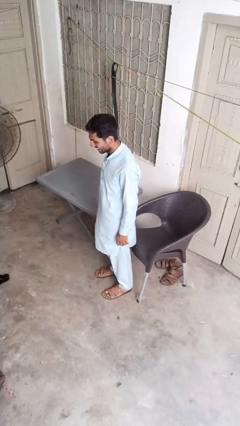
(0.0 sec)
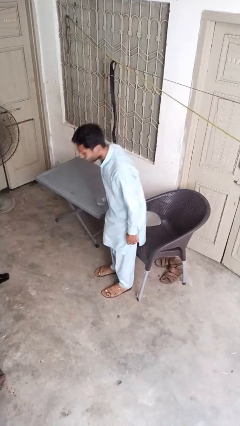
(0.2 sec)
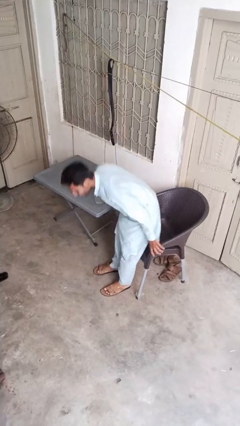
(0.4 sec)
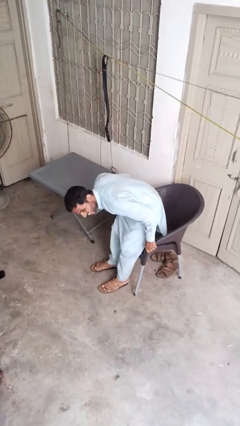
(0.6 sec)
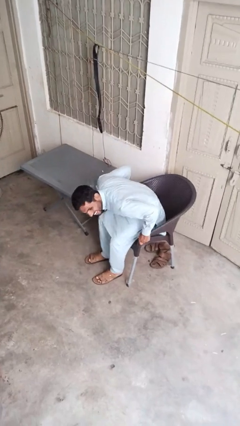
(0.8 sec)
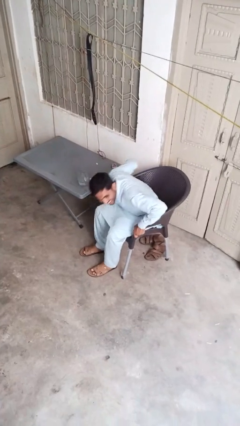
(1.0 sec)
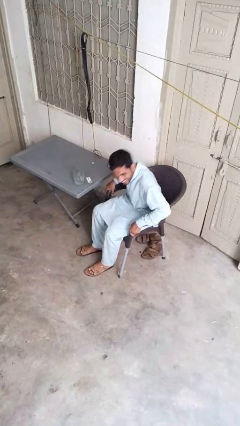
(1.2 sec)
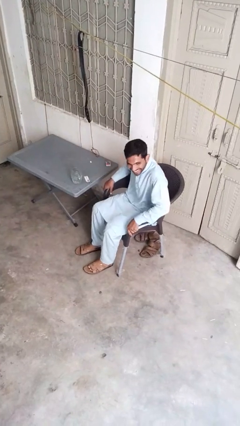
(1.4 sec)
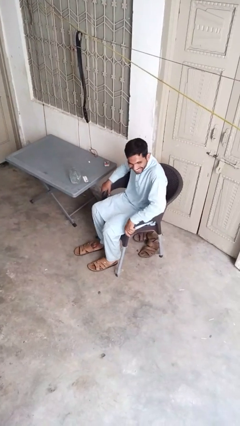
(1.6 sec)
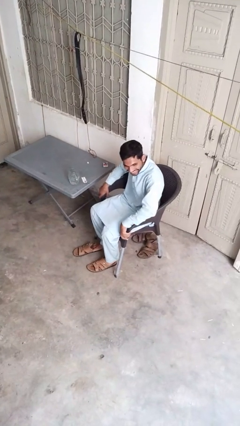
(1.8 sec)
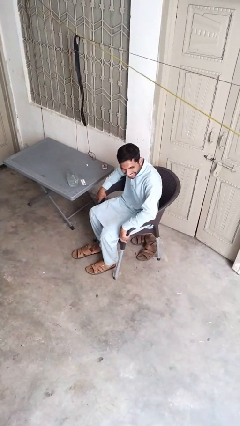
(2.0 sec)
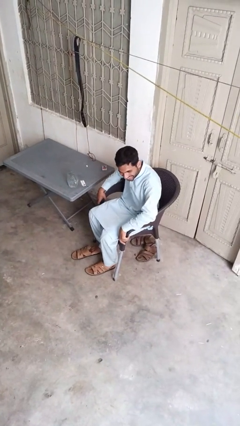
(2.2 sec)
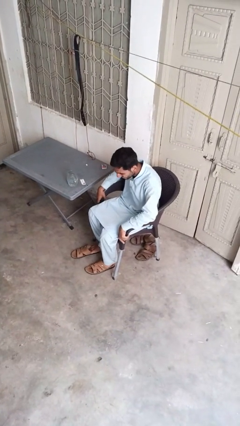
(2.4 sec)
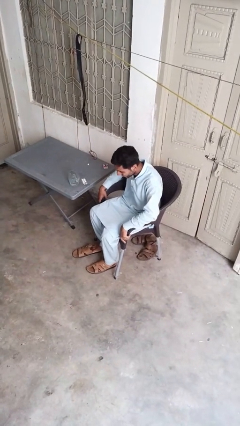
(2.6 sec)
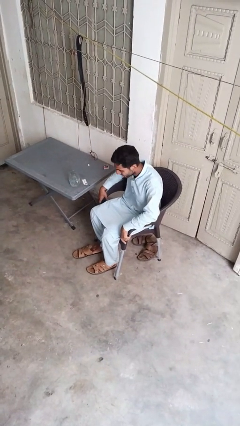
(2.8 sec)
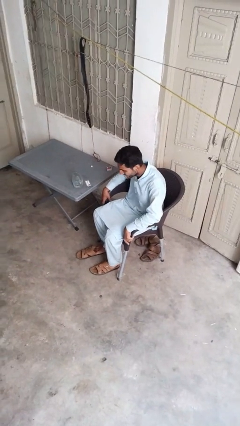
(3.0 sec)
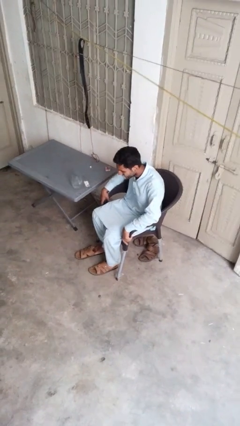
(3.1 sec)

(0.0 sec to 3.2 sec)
person sits down

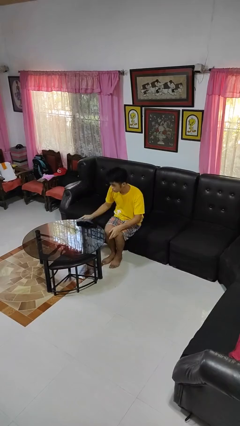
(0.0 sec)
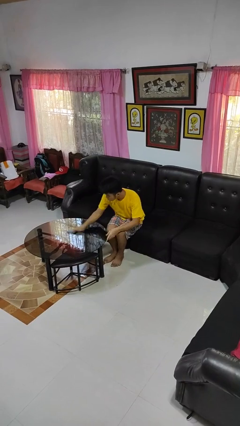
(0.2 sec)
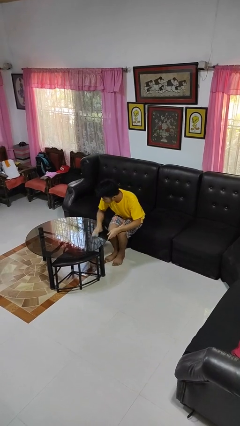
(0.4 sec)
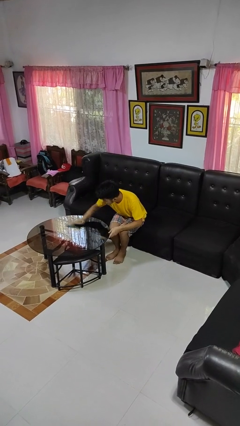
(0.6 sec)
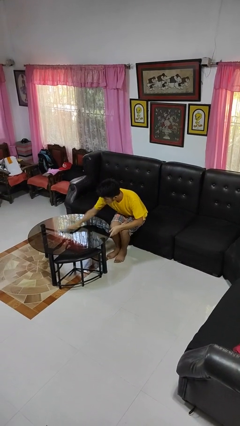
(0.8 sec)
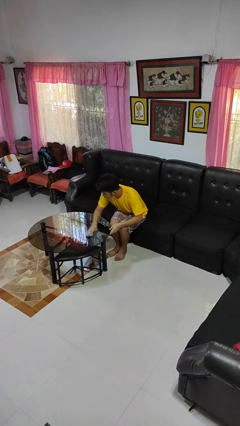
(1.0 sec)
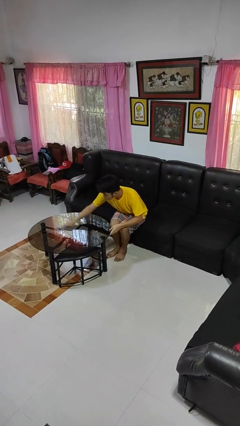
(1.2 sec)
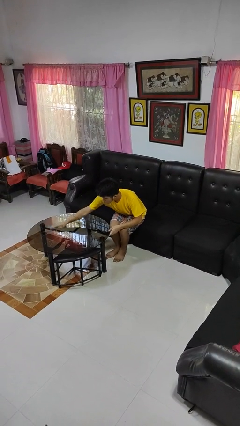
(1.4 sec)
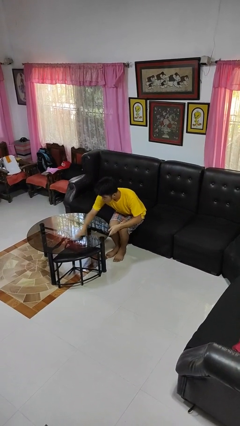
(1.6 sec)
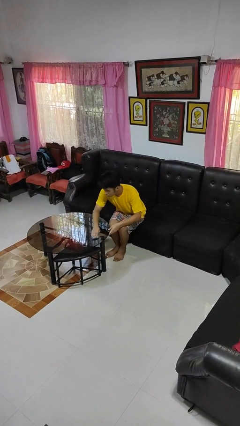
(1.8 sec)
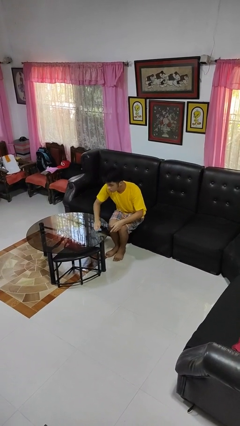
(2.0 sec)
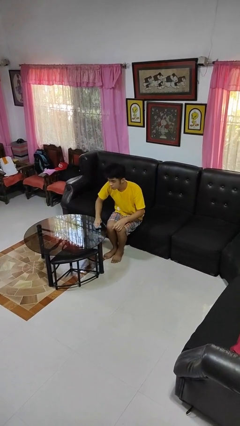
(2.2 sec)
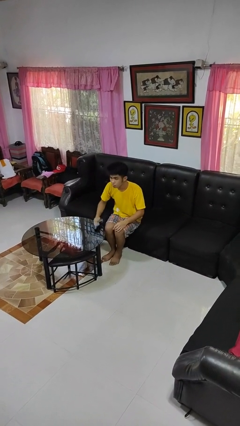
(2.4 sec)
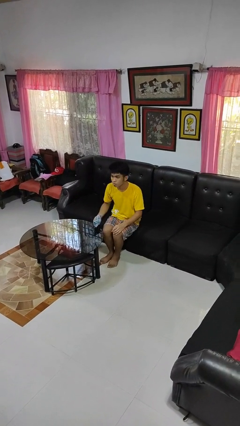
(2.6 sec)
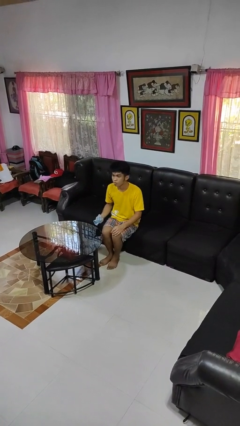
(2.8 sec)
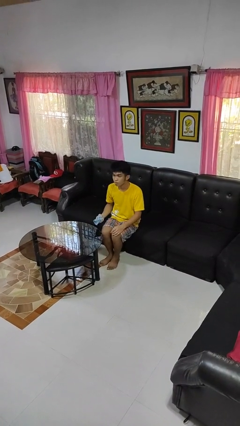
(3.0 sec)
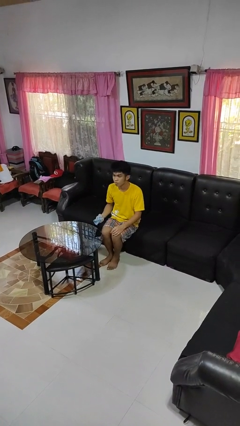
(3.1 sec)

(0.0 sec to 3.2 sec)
person cleans table with rag

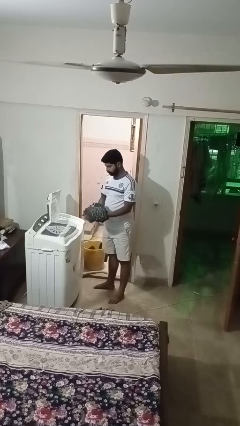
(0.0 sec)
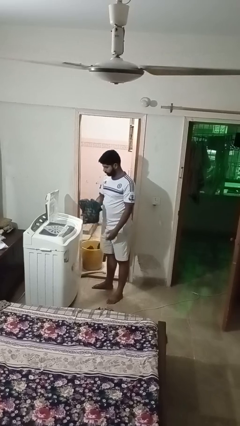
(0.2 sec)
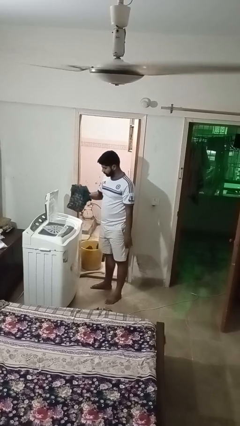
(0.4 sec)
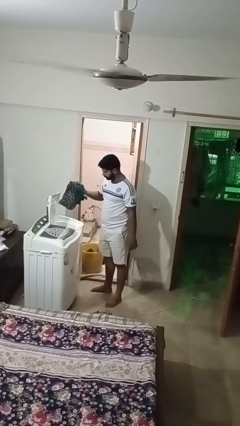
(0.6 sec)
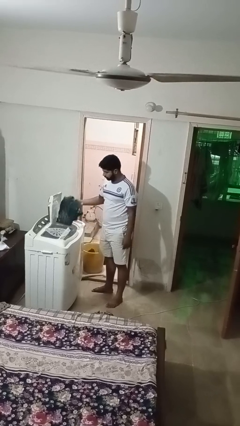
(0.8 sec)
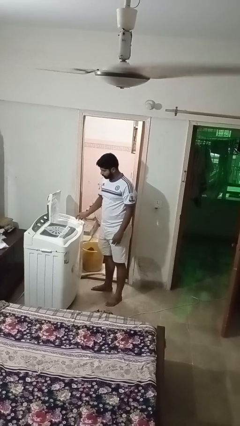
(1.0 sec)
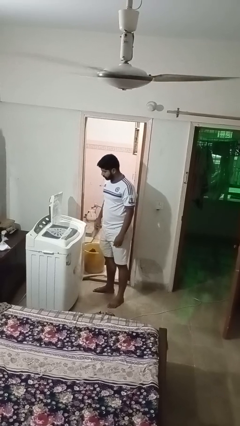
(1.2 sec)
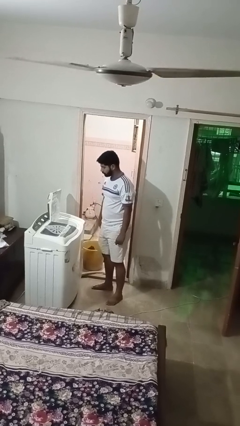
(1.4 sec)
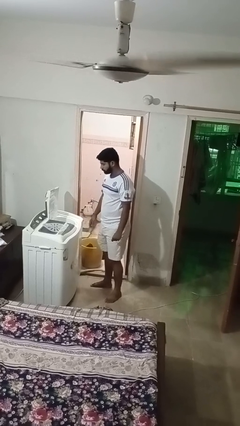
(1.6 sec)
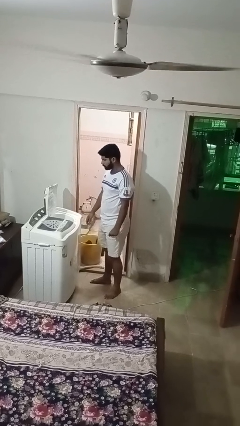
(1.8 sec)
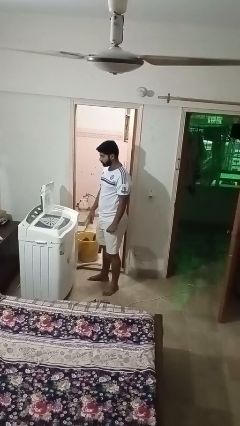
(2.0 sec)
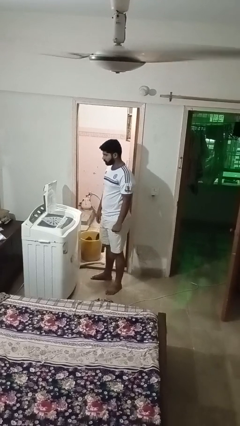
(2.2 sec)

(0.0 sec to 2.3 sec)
person loads dryer

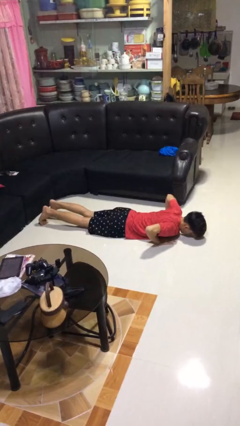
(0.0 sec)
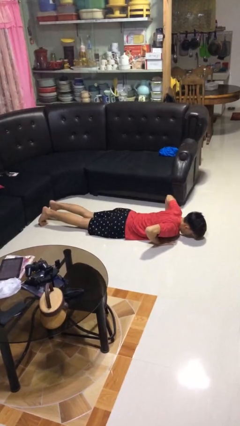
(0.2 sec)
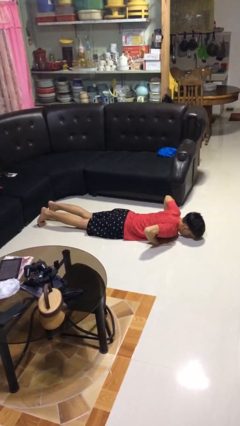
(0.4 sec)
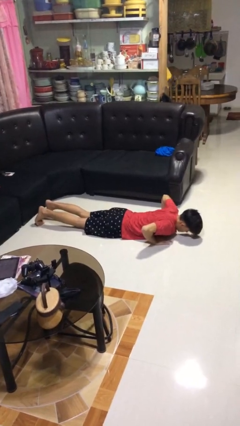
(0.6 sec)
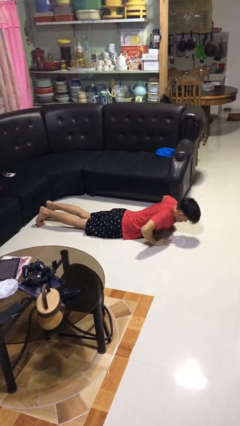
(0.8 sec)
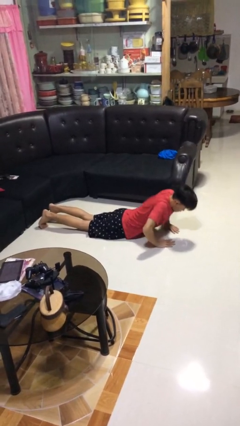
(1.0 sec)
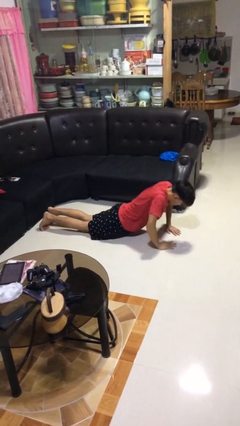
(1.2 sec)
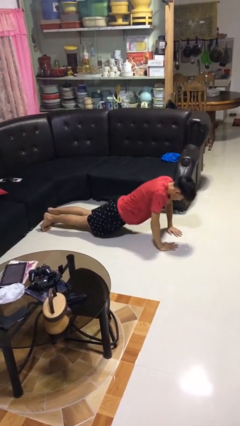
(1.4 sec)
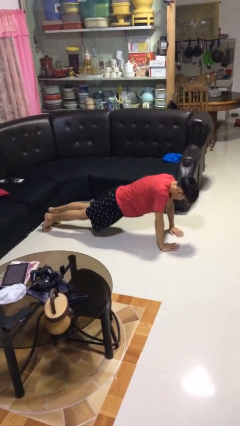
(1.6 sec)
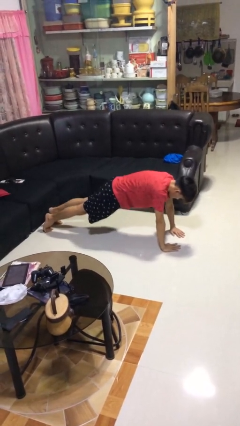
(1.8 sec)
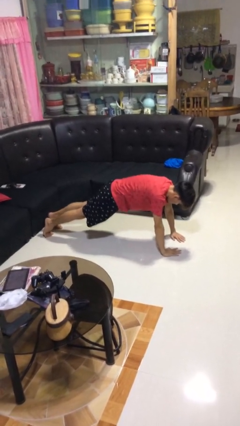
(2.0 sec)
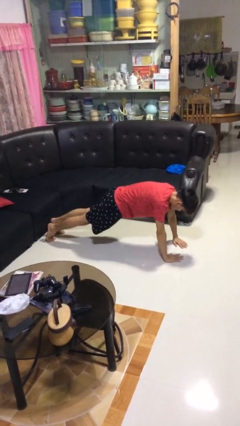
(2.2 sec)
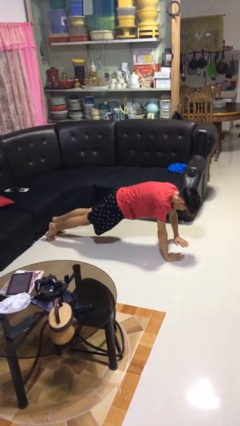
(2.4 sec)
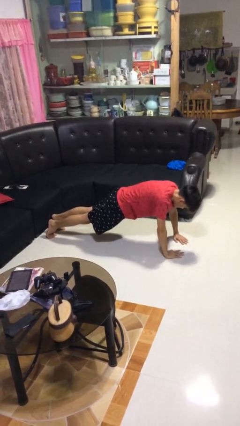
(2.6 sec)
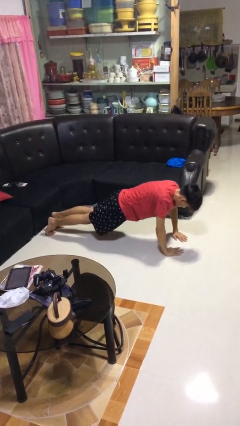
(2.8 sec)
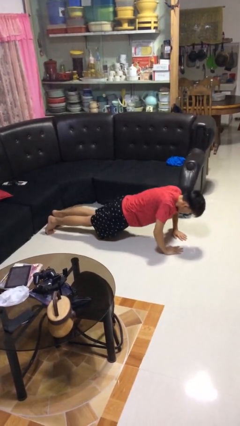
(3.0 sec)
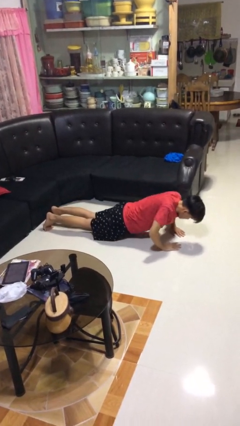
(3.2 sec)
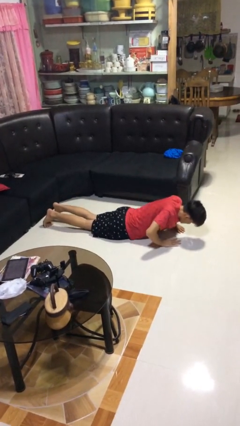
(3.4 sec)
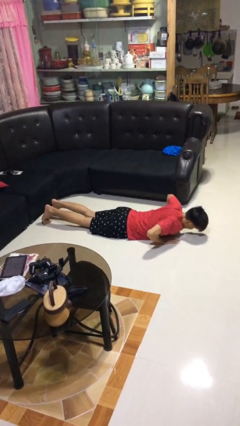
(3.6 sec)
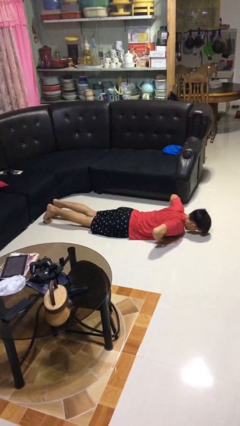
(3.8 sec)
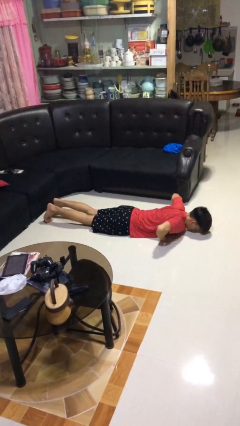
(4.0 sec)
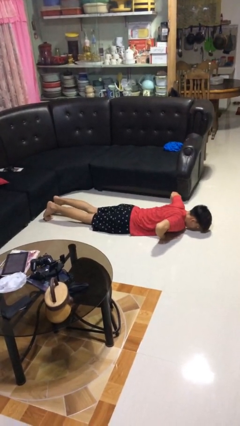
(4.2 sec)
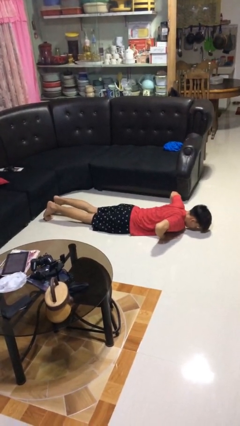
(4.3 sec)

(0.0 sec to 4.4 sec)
person exercises with pushup

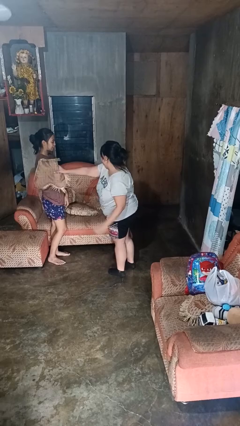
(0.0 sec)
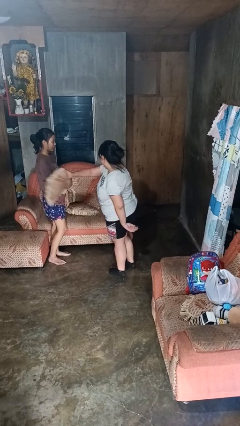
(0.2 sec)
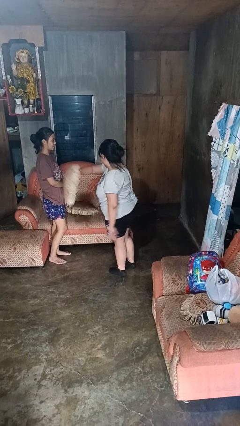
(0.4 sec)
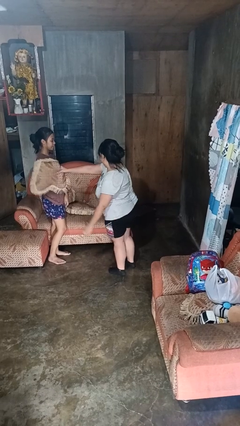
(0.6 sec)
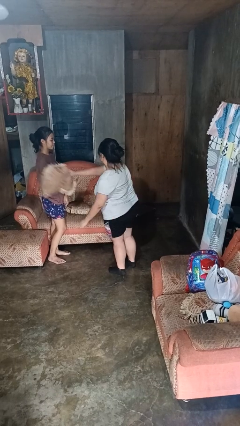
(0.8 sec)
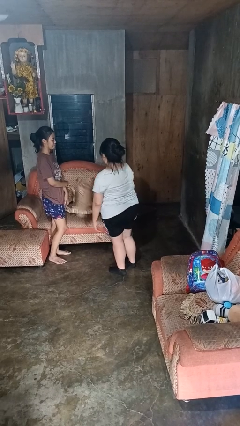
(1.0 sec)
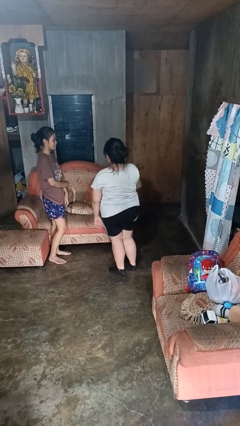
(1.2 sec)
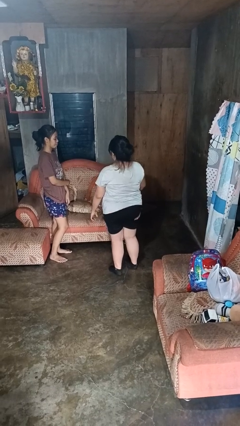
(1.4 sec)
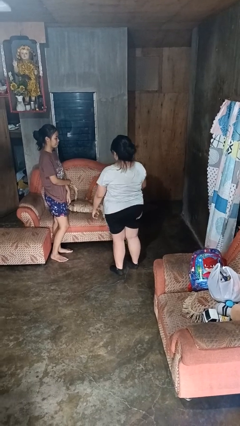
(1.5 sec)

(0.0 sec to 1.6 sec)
person hits person with pillow

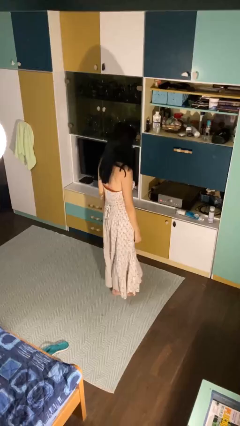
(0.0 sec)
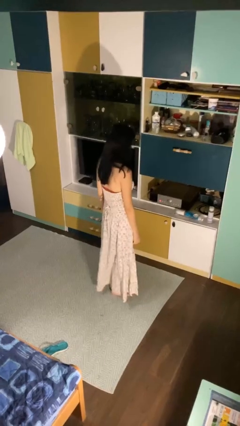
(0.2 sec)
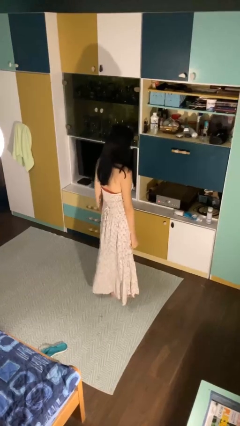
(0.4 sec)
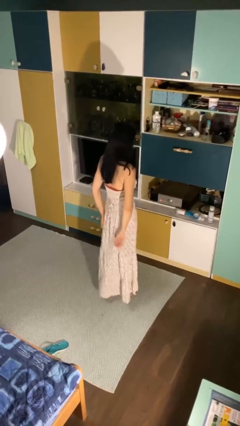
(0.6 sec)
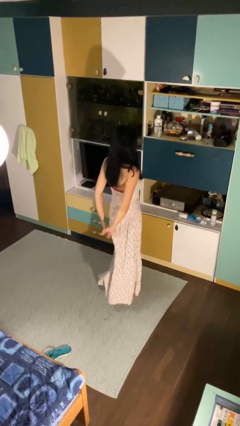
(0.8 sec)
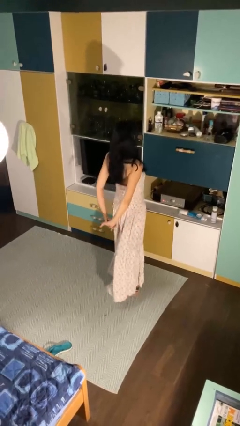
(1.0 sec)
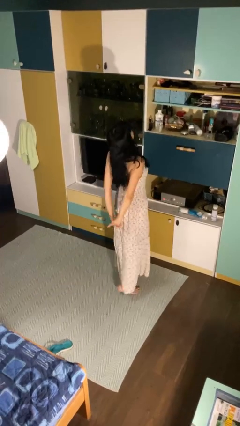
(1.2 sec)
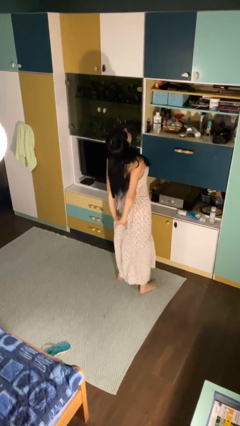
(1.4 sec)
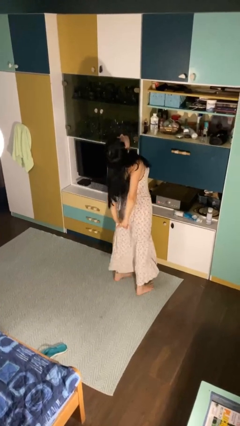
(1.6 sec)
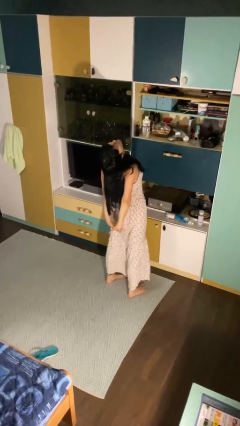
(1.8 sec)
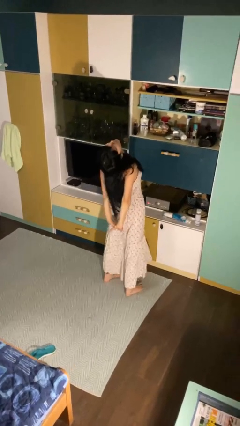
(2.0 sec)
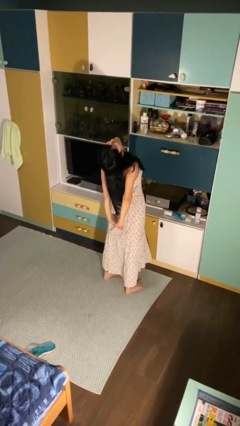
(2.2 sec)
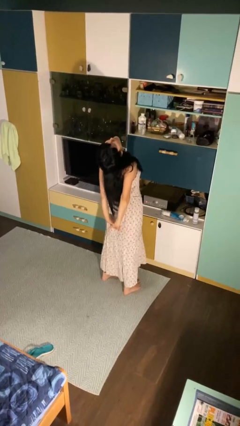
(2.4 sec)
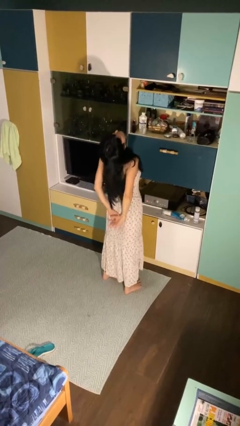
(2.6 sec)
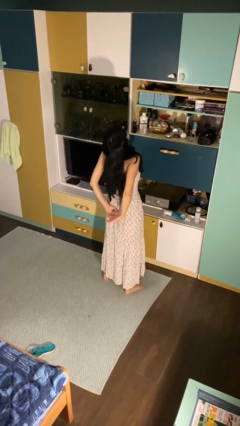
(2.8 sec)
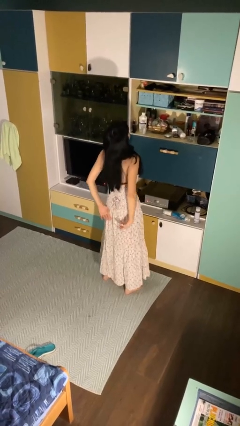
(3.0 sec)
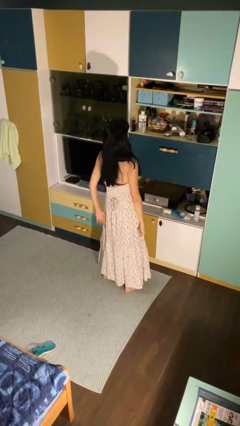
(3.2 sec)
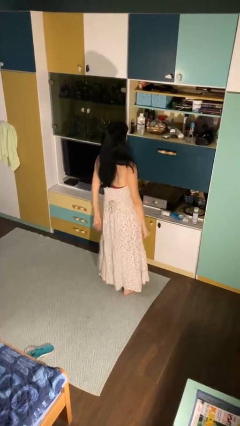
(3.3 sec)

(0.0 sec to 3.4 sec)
person stretches back
